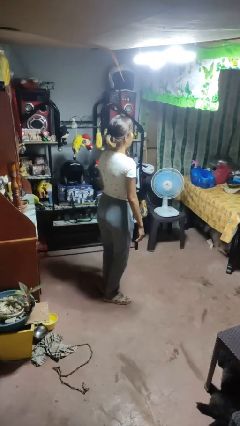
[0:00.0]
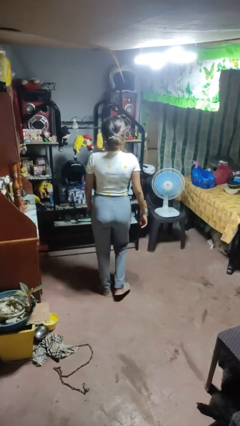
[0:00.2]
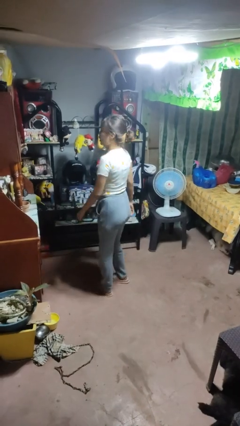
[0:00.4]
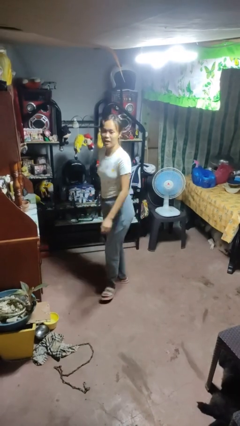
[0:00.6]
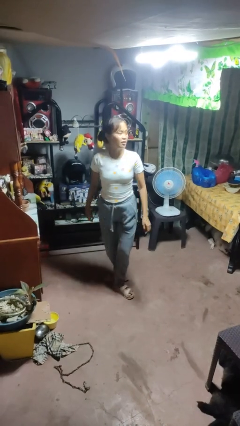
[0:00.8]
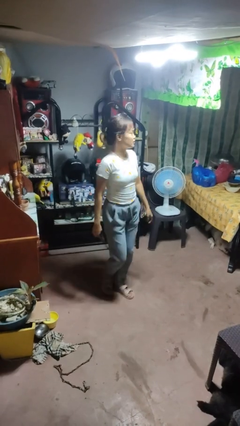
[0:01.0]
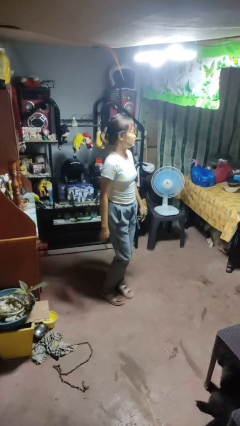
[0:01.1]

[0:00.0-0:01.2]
person twirls

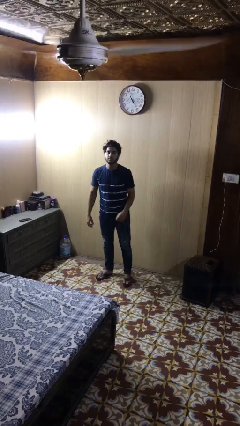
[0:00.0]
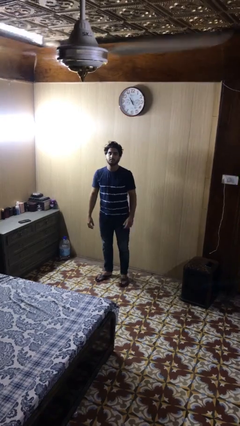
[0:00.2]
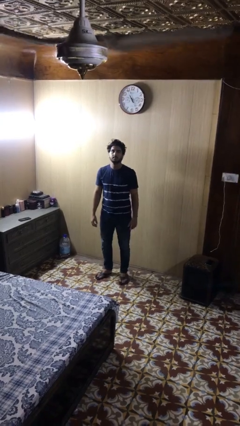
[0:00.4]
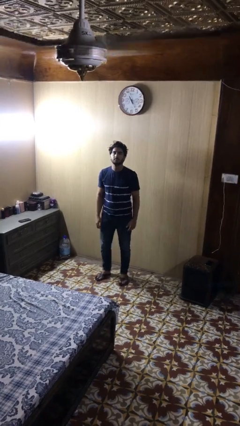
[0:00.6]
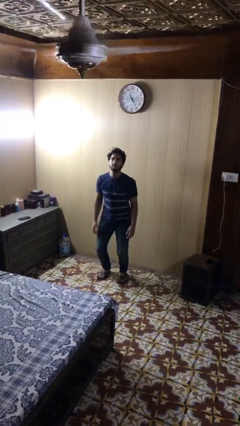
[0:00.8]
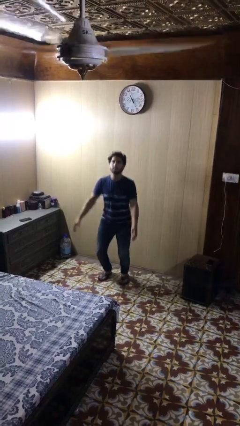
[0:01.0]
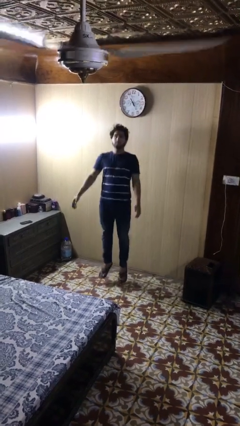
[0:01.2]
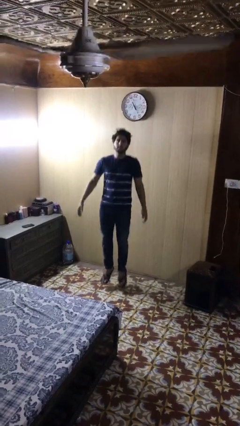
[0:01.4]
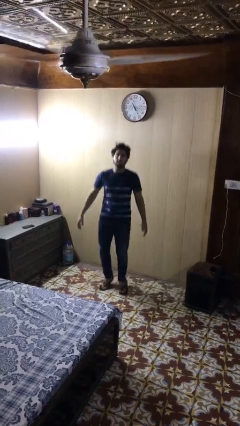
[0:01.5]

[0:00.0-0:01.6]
person jumps

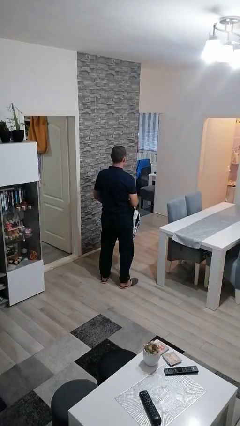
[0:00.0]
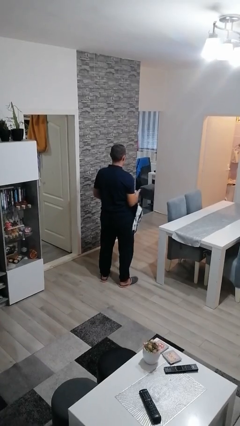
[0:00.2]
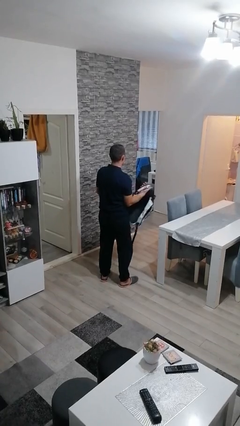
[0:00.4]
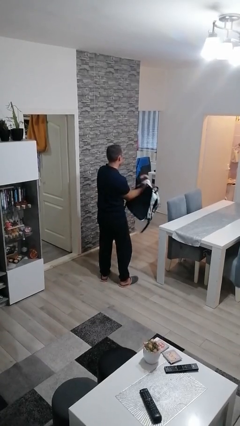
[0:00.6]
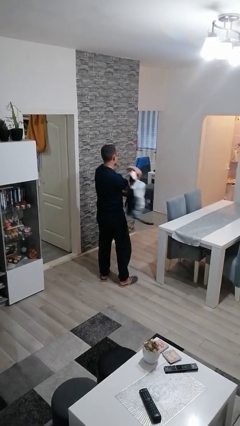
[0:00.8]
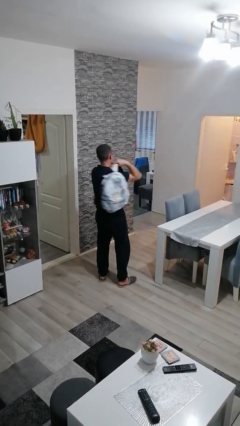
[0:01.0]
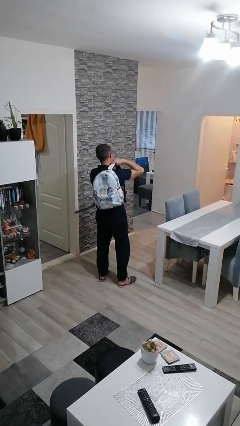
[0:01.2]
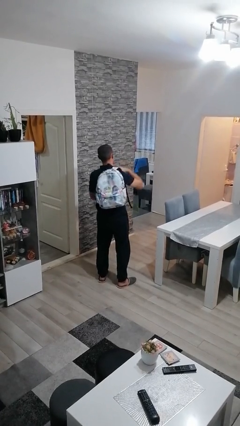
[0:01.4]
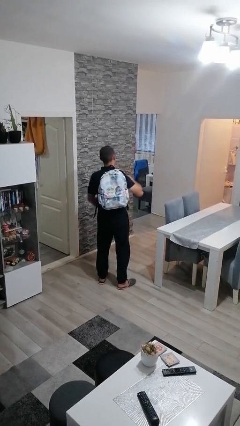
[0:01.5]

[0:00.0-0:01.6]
person puts on backpack

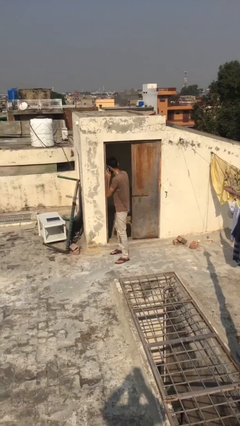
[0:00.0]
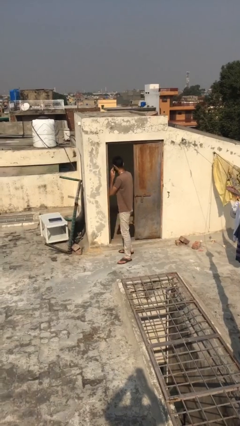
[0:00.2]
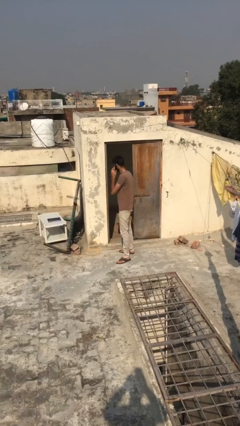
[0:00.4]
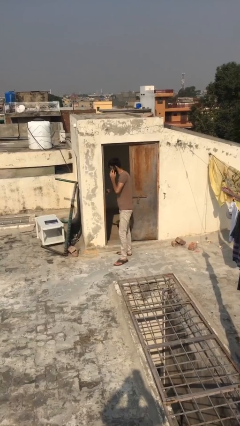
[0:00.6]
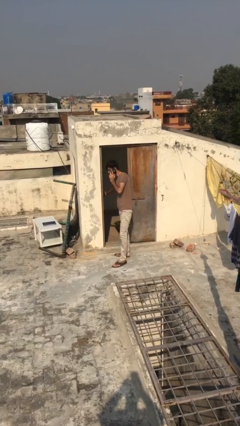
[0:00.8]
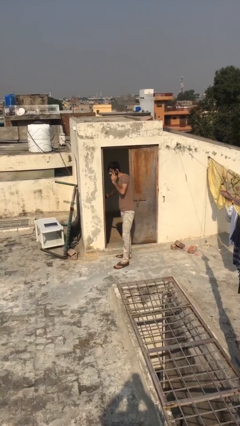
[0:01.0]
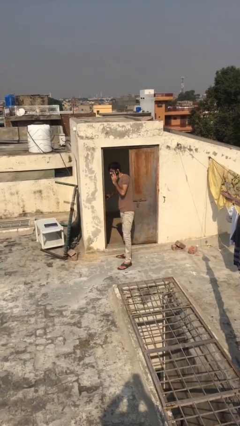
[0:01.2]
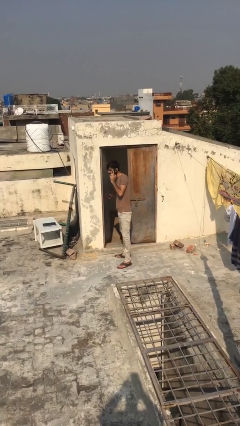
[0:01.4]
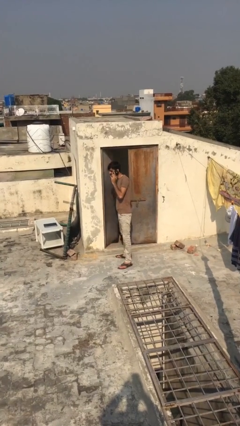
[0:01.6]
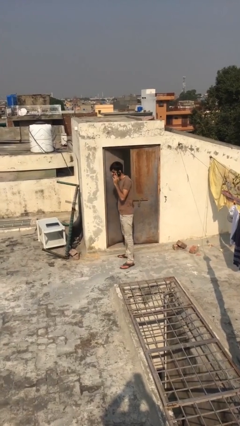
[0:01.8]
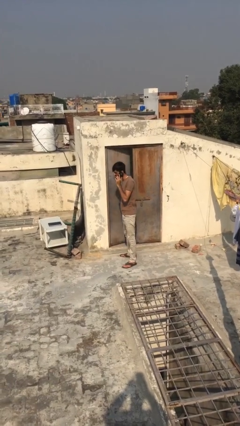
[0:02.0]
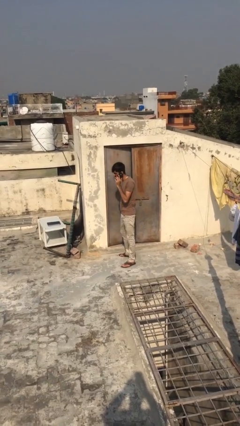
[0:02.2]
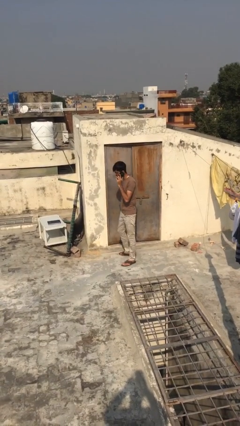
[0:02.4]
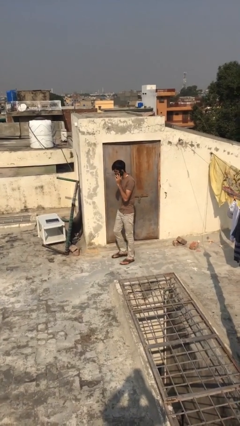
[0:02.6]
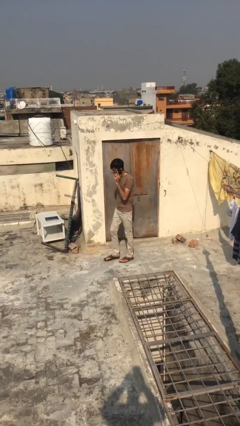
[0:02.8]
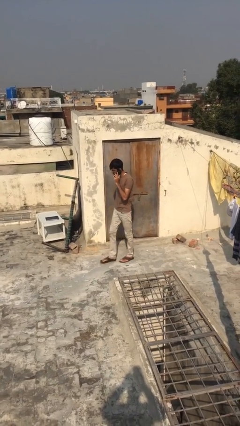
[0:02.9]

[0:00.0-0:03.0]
person closes facility door

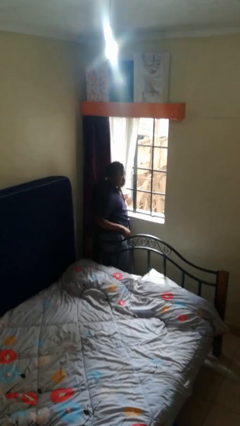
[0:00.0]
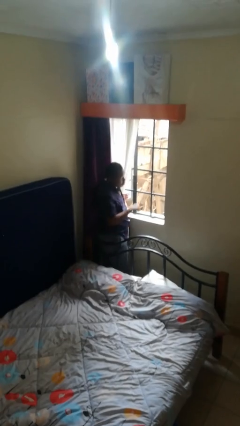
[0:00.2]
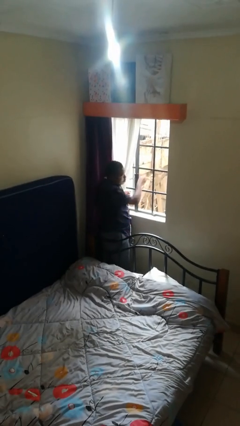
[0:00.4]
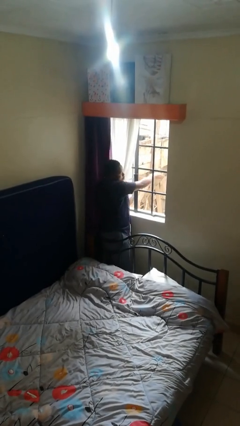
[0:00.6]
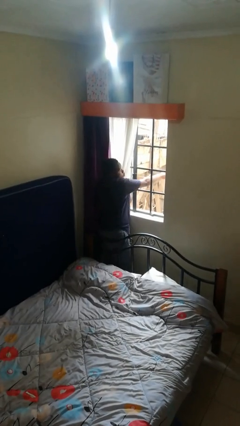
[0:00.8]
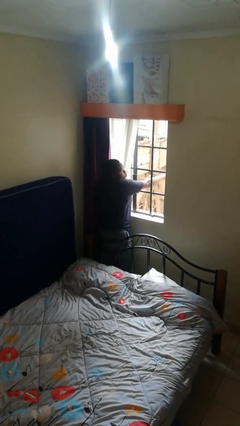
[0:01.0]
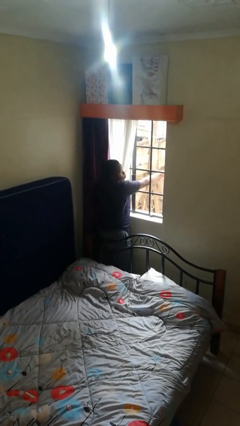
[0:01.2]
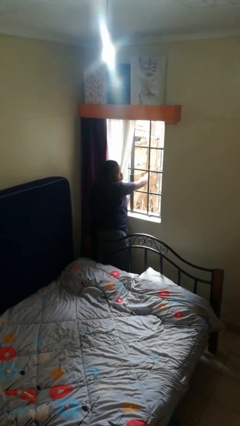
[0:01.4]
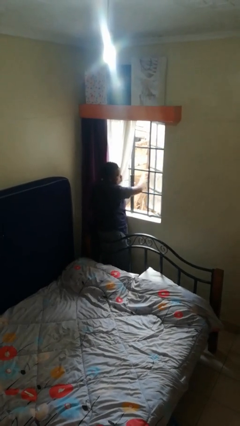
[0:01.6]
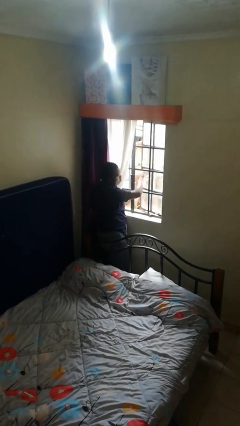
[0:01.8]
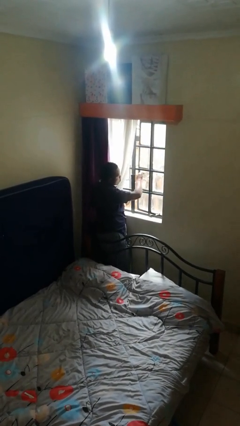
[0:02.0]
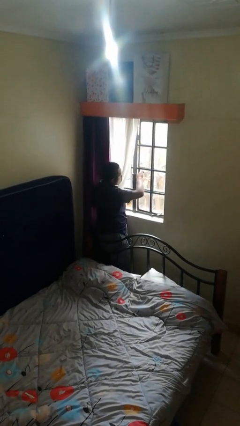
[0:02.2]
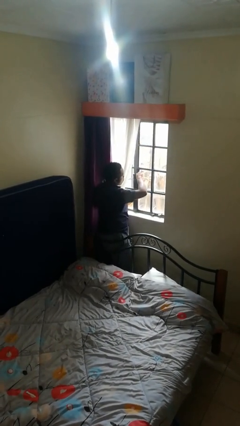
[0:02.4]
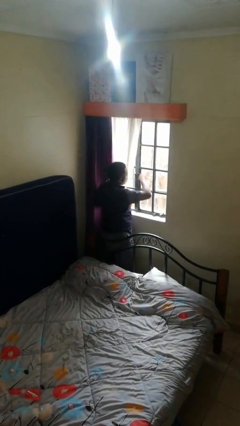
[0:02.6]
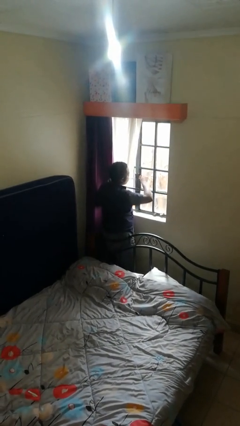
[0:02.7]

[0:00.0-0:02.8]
person closes home window

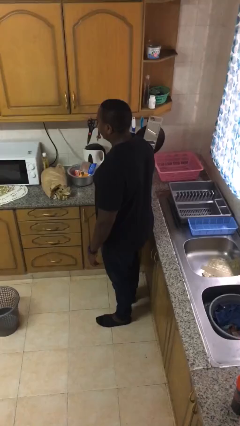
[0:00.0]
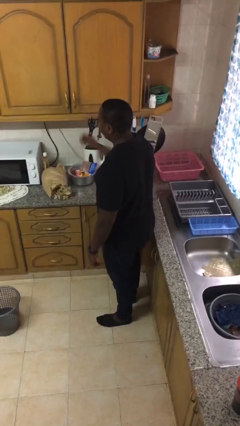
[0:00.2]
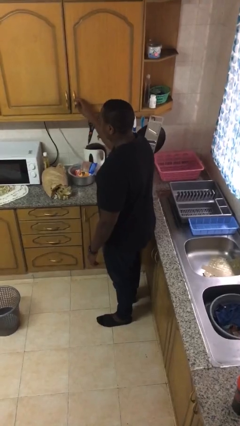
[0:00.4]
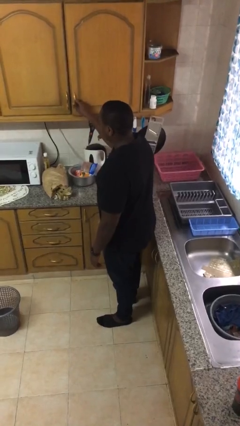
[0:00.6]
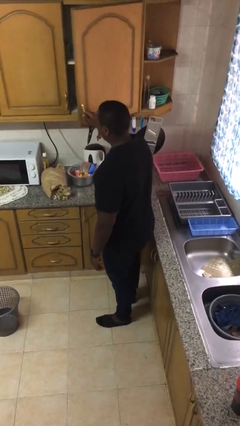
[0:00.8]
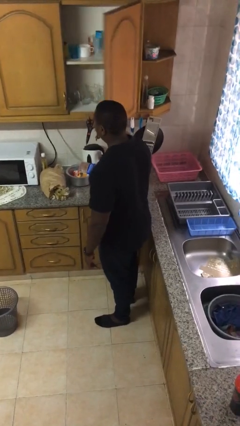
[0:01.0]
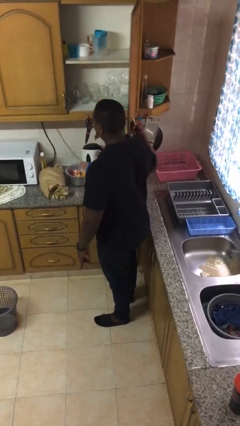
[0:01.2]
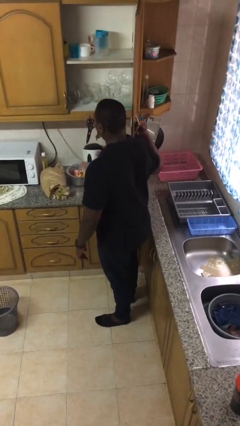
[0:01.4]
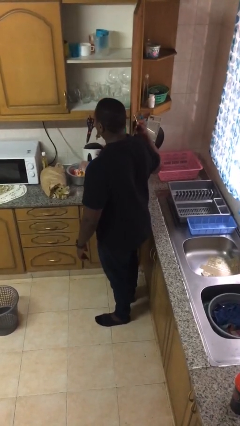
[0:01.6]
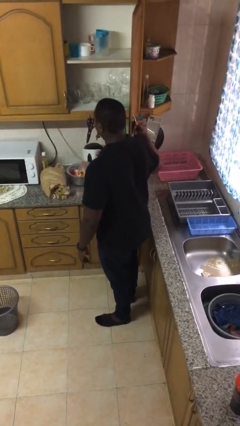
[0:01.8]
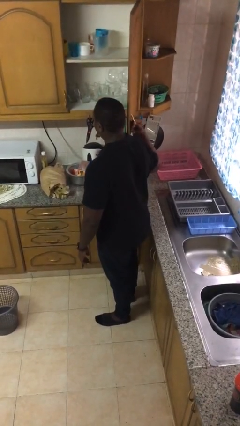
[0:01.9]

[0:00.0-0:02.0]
person opens cabinet

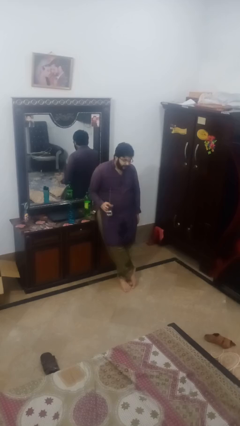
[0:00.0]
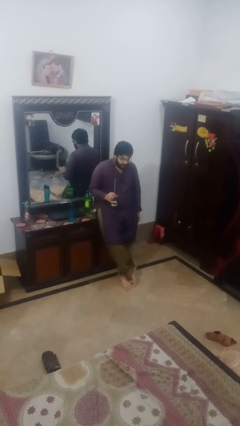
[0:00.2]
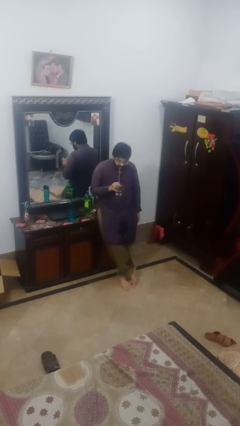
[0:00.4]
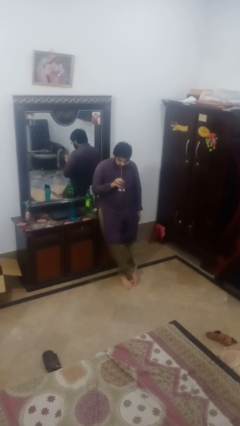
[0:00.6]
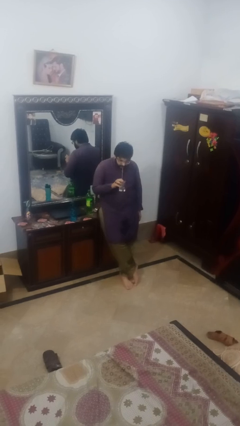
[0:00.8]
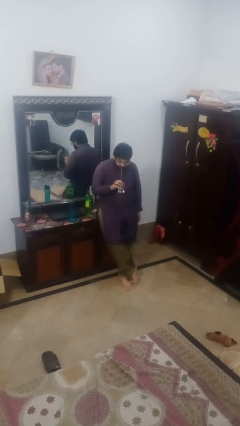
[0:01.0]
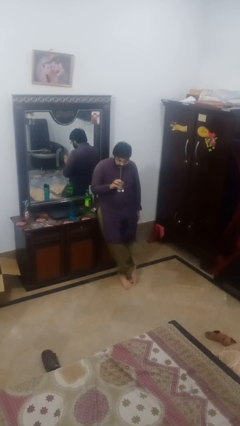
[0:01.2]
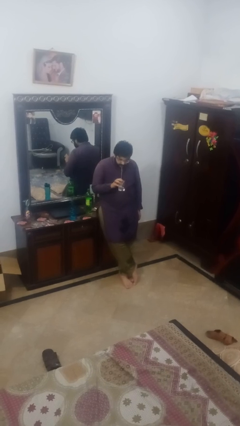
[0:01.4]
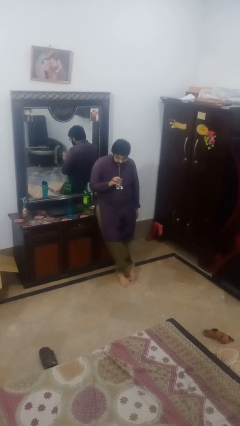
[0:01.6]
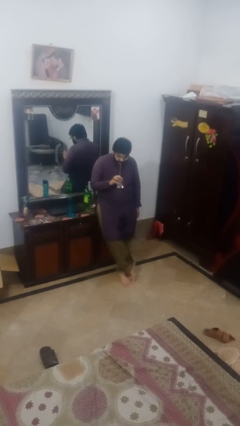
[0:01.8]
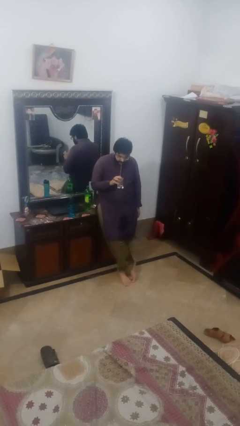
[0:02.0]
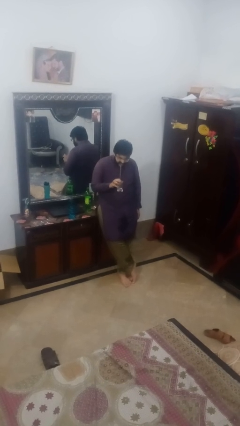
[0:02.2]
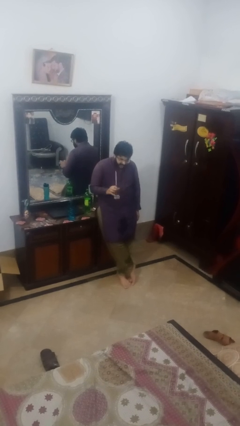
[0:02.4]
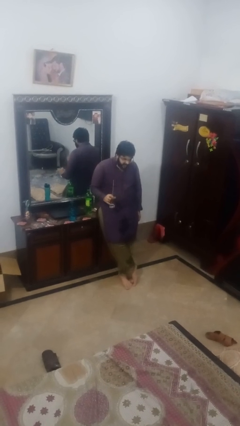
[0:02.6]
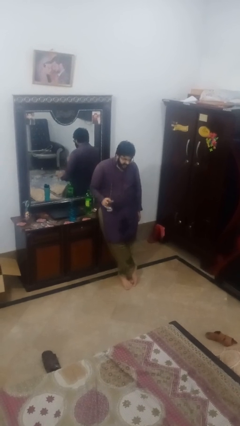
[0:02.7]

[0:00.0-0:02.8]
person drinks from straw

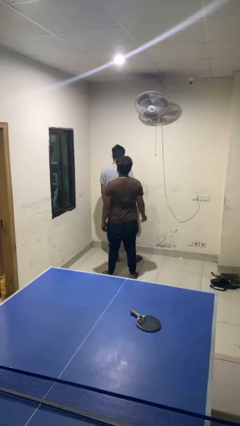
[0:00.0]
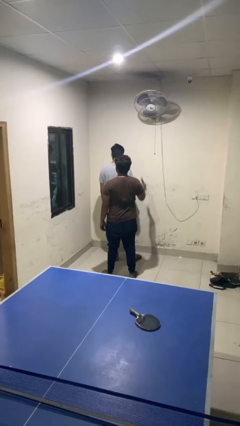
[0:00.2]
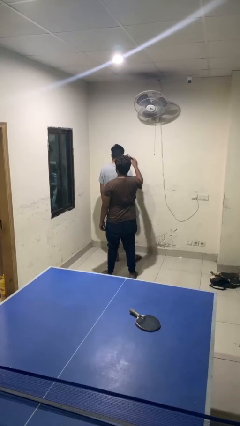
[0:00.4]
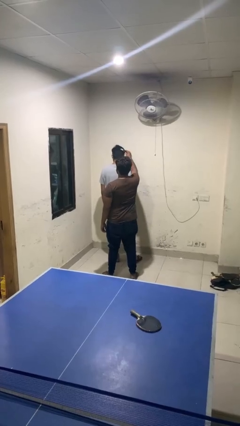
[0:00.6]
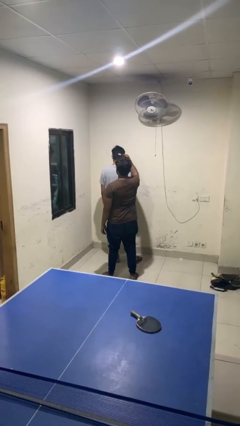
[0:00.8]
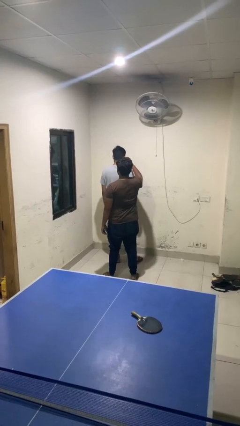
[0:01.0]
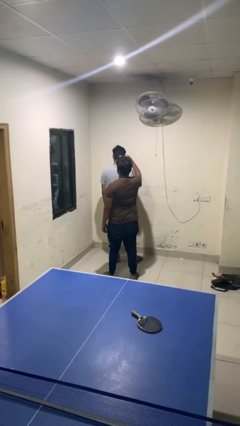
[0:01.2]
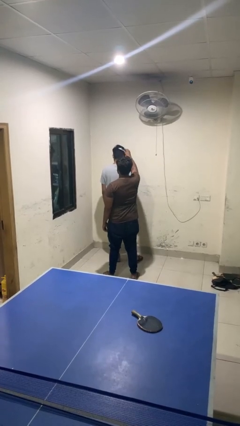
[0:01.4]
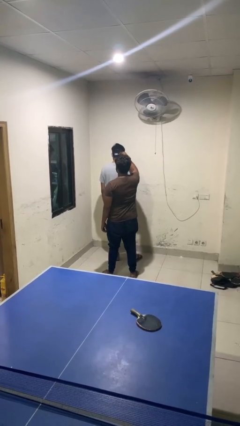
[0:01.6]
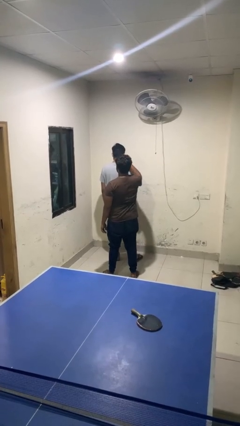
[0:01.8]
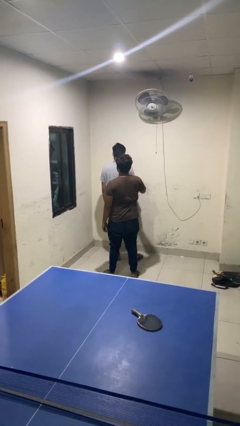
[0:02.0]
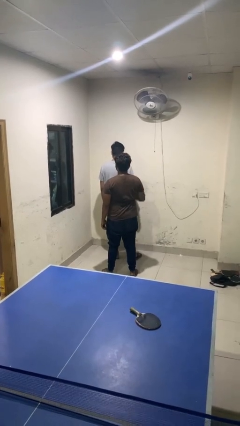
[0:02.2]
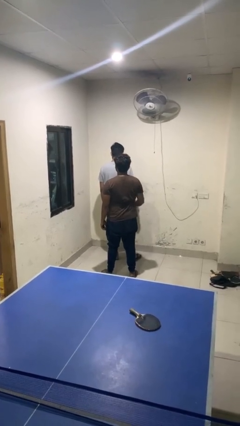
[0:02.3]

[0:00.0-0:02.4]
person brushes hair of person
